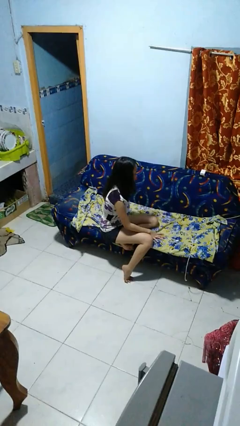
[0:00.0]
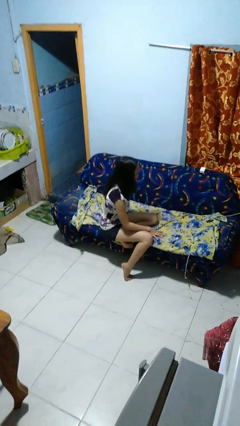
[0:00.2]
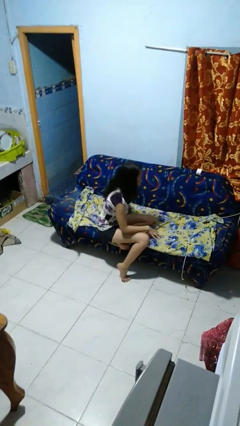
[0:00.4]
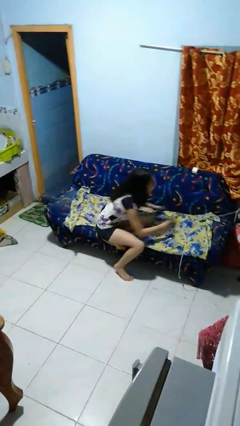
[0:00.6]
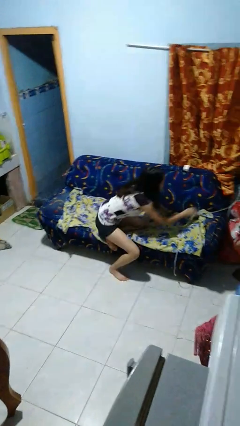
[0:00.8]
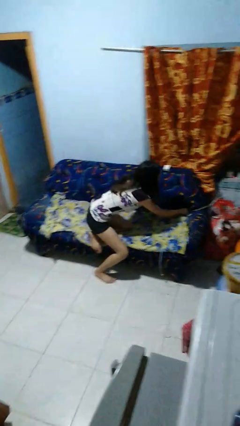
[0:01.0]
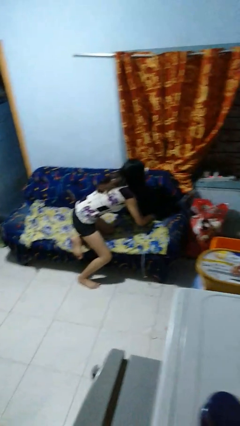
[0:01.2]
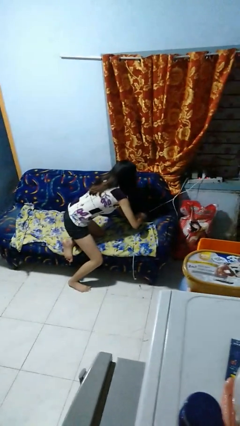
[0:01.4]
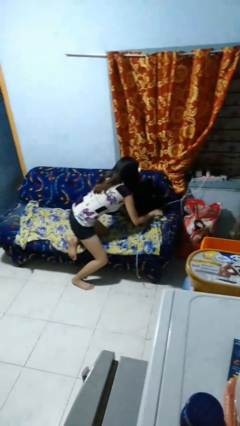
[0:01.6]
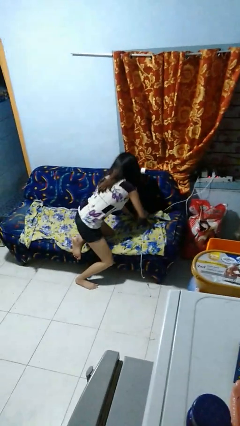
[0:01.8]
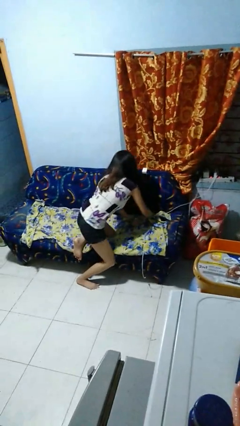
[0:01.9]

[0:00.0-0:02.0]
person searches in couch

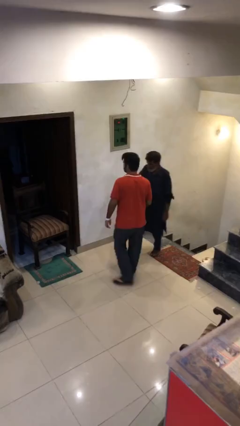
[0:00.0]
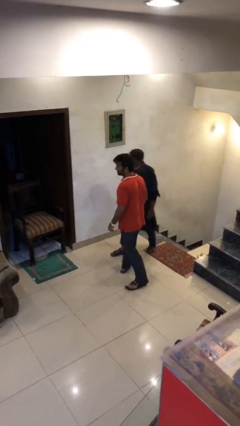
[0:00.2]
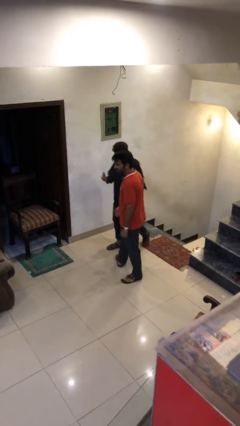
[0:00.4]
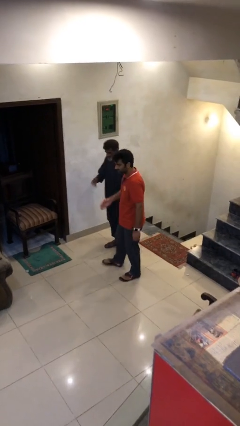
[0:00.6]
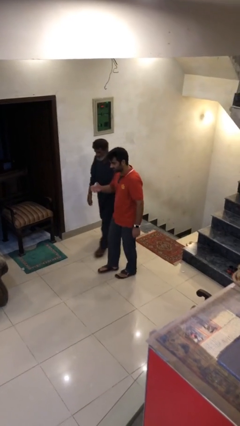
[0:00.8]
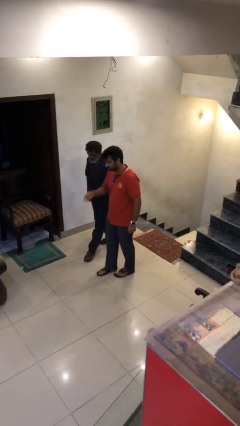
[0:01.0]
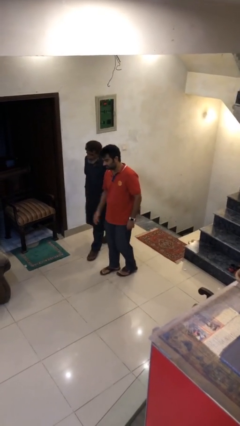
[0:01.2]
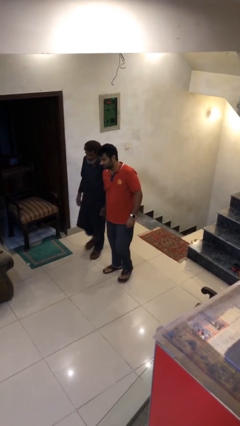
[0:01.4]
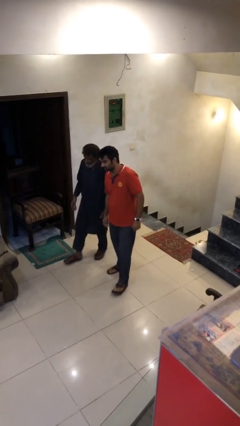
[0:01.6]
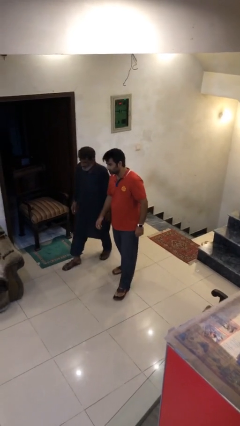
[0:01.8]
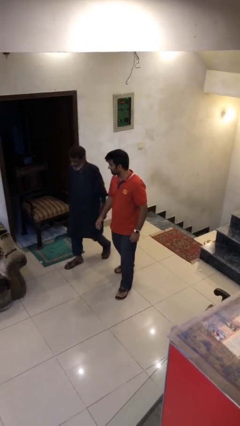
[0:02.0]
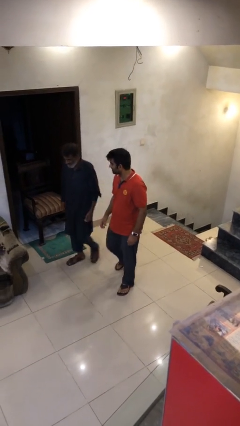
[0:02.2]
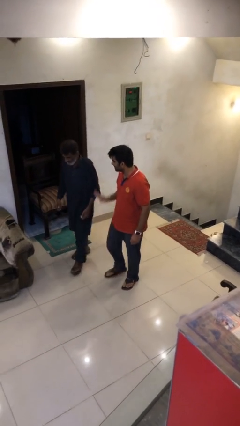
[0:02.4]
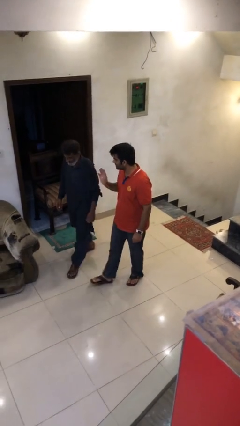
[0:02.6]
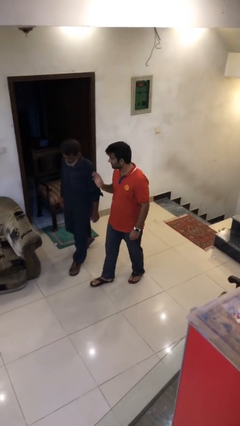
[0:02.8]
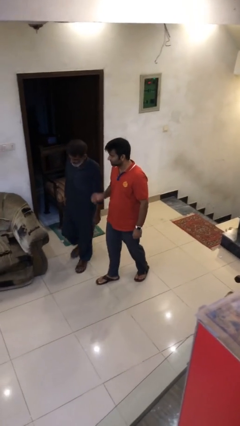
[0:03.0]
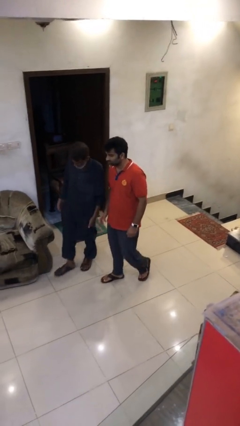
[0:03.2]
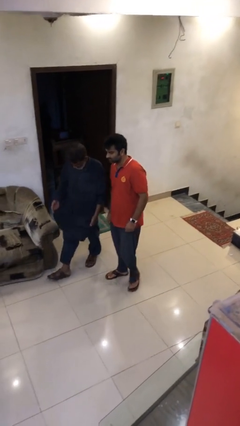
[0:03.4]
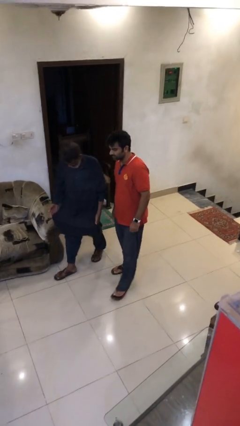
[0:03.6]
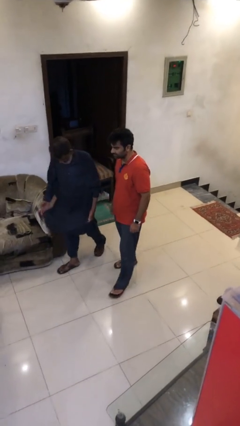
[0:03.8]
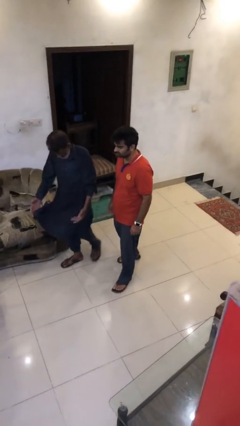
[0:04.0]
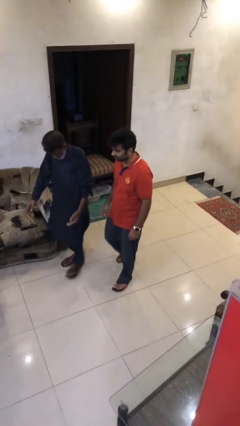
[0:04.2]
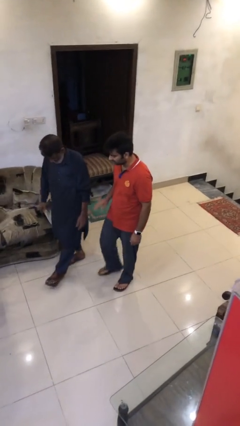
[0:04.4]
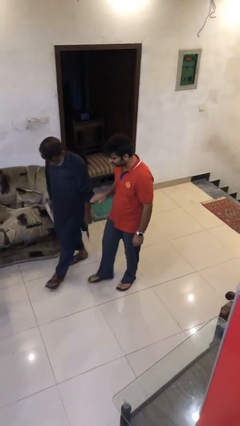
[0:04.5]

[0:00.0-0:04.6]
person talks to person

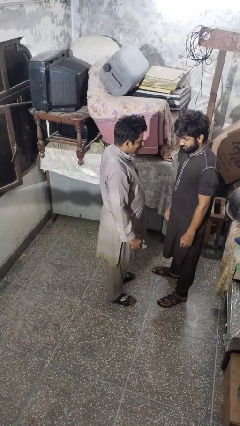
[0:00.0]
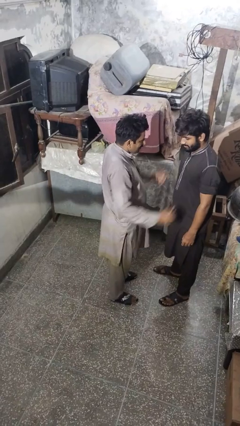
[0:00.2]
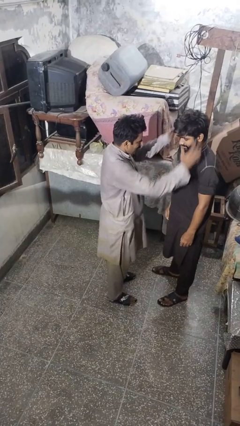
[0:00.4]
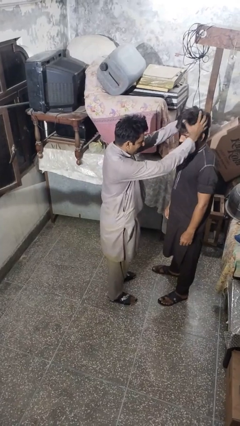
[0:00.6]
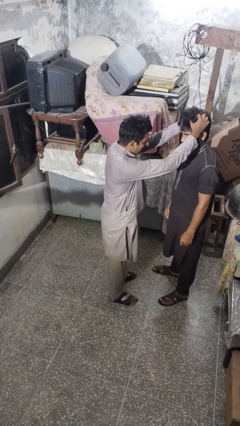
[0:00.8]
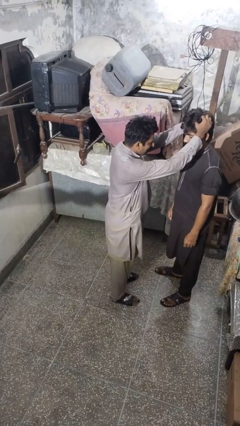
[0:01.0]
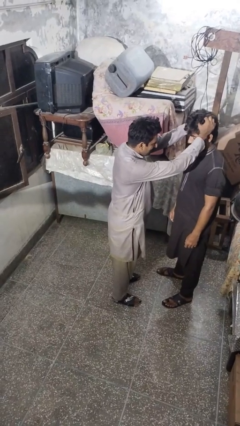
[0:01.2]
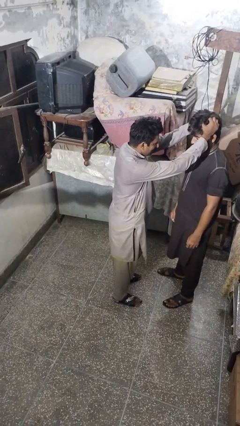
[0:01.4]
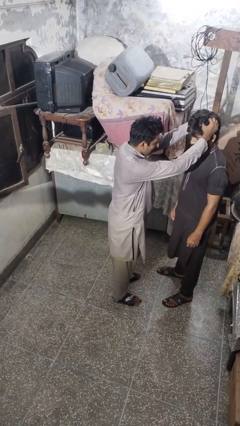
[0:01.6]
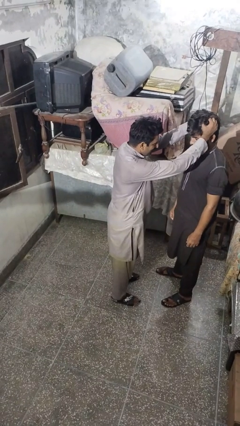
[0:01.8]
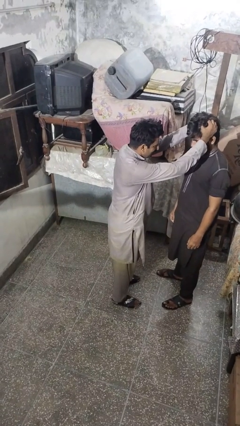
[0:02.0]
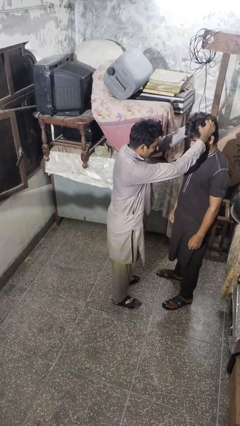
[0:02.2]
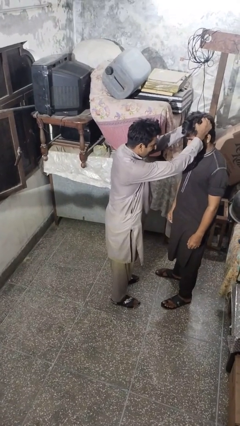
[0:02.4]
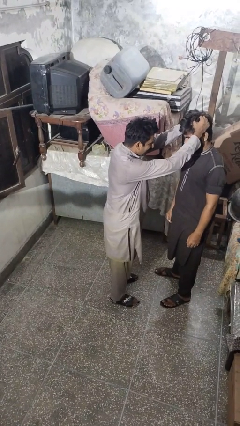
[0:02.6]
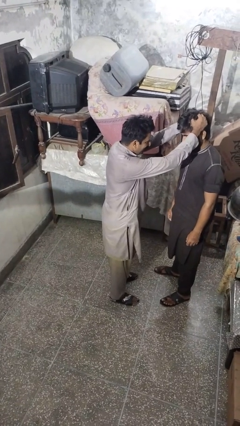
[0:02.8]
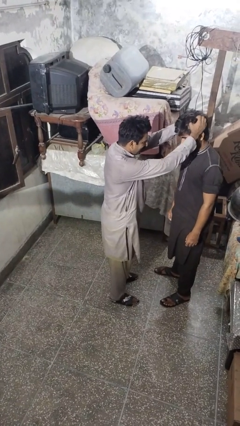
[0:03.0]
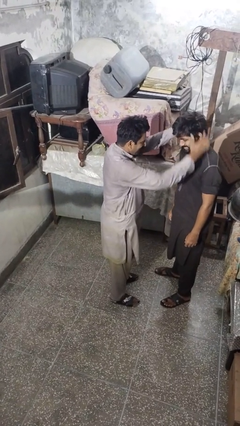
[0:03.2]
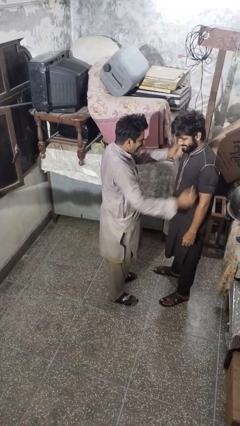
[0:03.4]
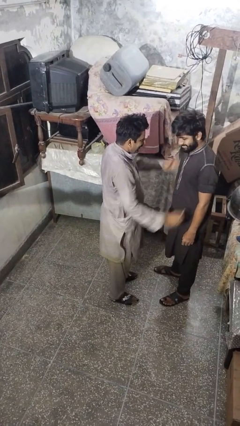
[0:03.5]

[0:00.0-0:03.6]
person grabs person by hair

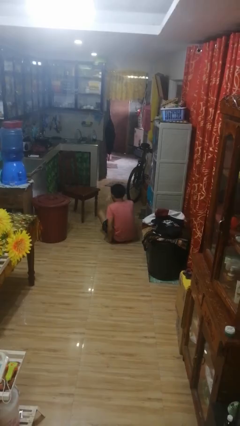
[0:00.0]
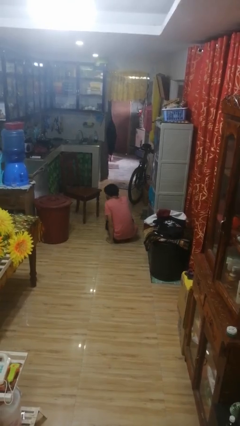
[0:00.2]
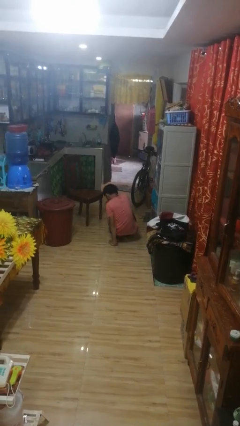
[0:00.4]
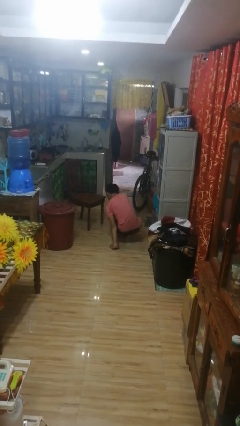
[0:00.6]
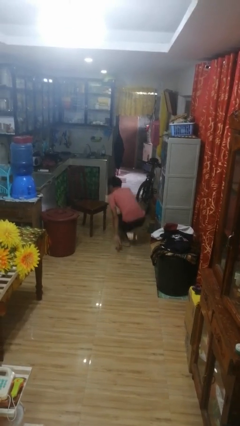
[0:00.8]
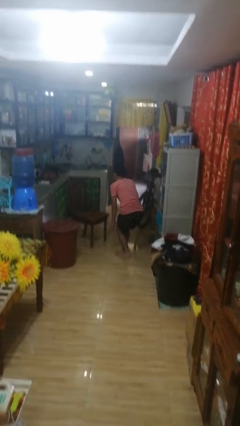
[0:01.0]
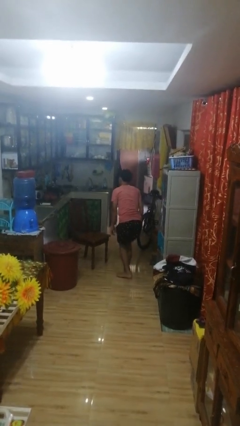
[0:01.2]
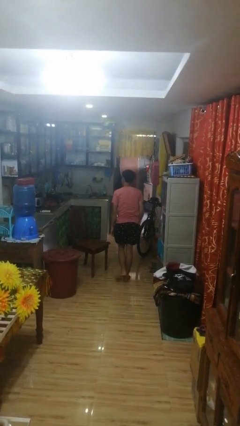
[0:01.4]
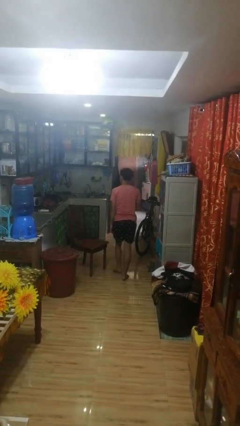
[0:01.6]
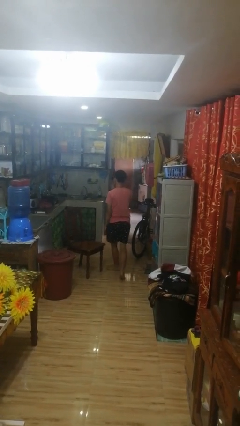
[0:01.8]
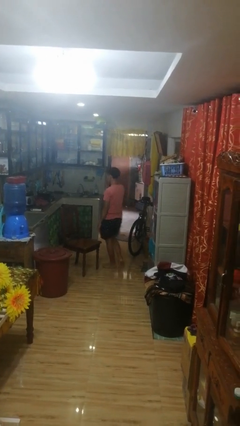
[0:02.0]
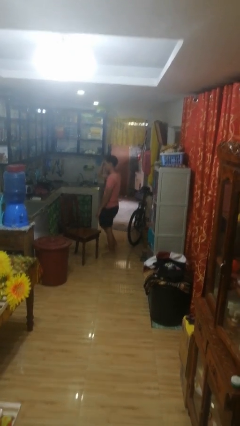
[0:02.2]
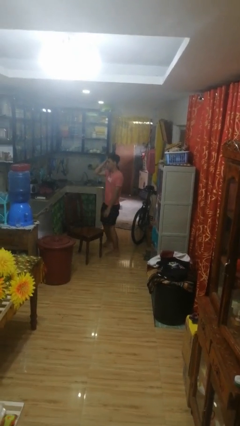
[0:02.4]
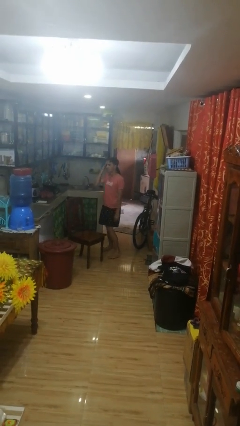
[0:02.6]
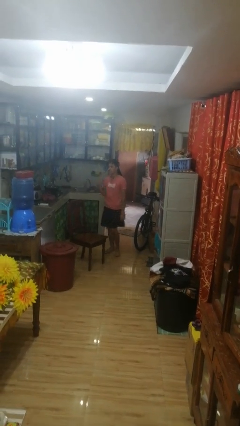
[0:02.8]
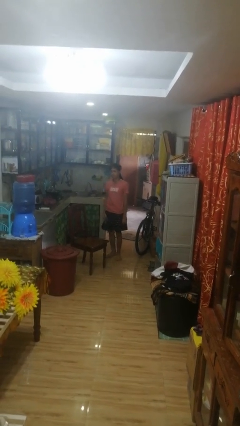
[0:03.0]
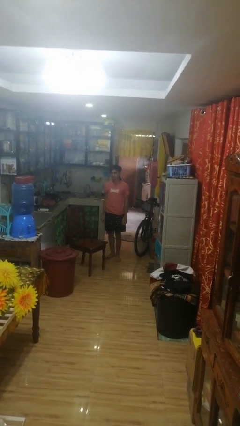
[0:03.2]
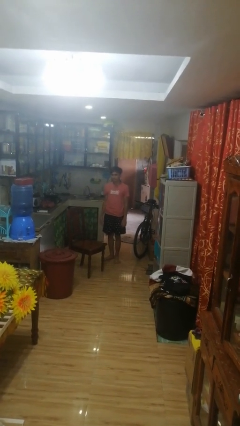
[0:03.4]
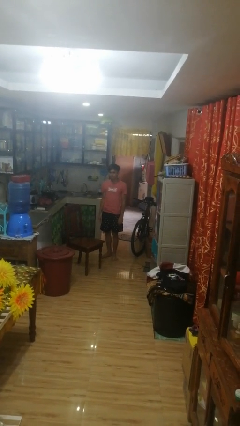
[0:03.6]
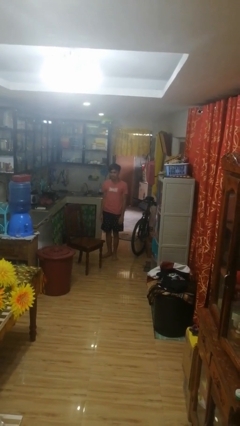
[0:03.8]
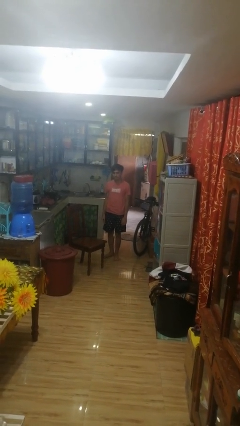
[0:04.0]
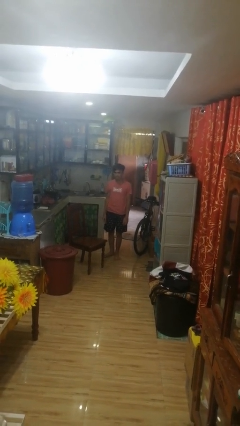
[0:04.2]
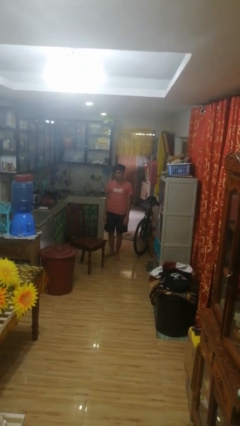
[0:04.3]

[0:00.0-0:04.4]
person stands up from floor

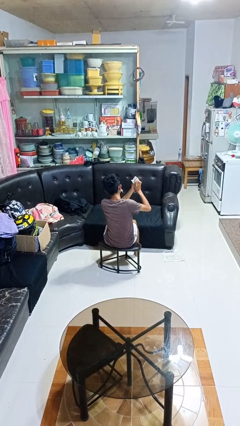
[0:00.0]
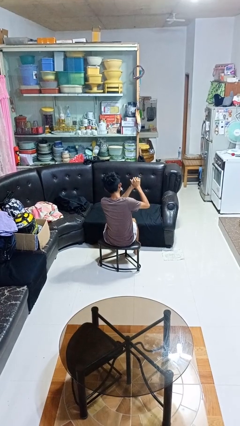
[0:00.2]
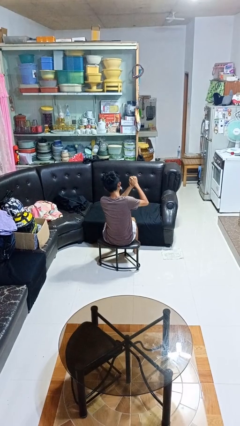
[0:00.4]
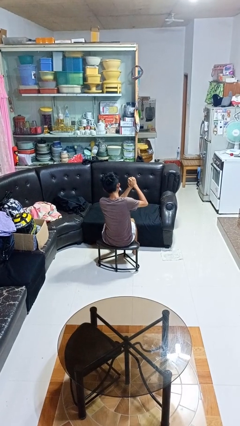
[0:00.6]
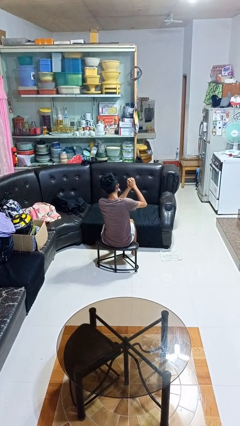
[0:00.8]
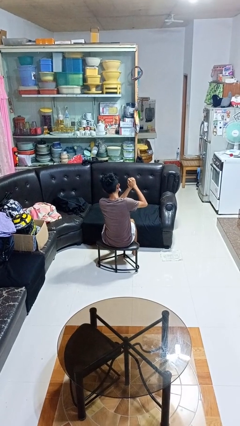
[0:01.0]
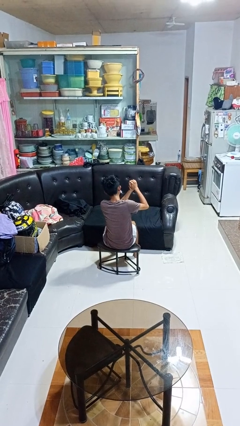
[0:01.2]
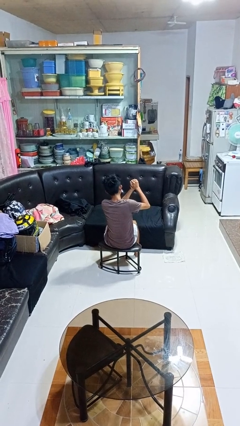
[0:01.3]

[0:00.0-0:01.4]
person crumples paper

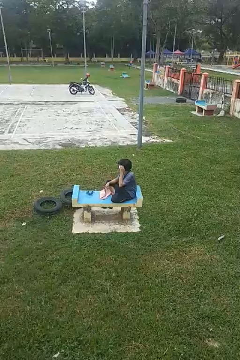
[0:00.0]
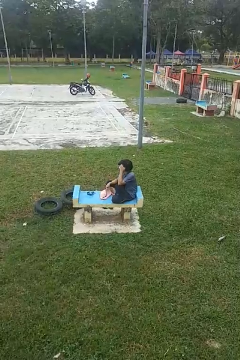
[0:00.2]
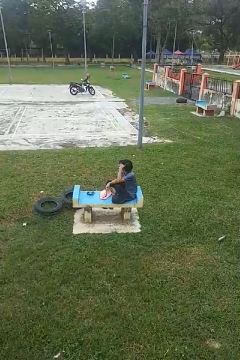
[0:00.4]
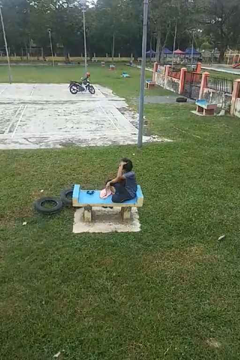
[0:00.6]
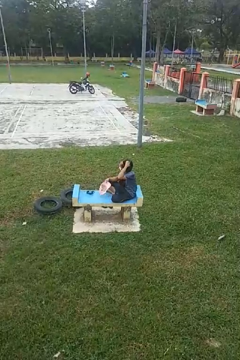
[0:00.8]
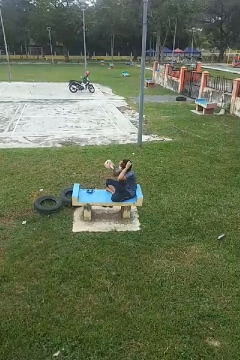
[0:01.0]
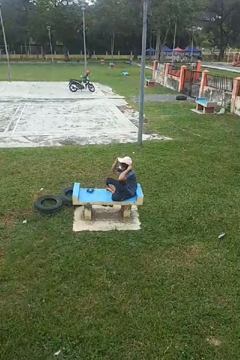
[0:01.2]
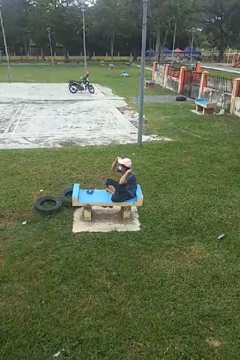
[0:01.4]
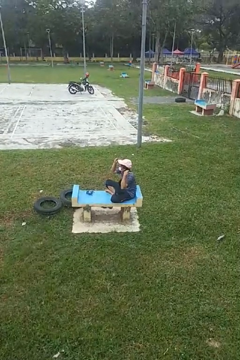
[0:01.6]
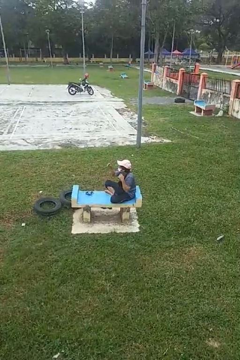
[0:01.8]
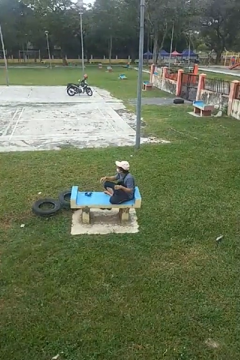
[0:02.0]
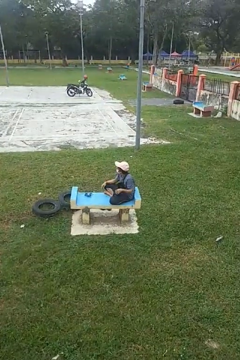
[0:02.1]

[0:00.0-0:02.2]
person puts on hat
